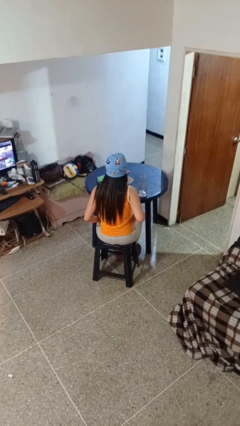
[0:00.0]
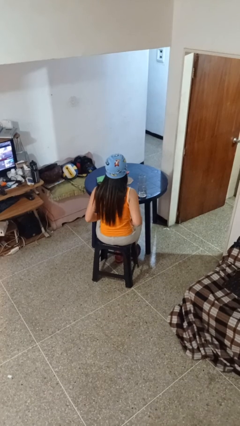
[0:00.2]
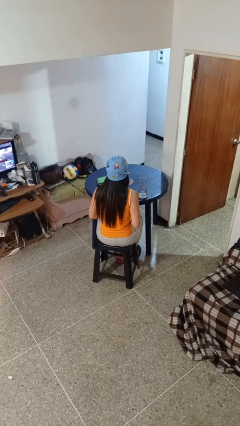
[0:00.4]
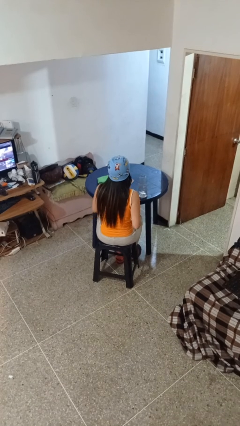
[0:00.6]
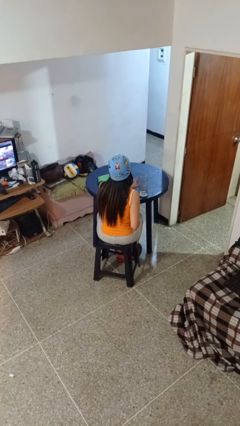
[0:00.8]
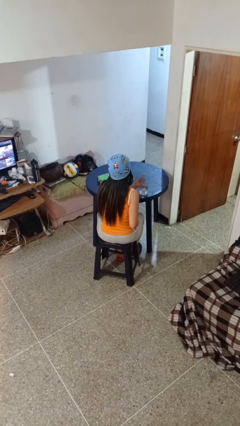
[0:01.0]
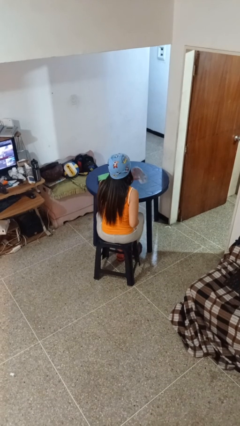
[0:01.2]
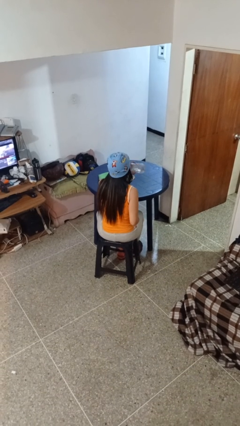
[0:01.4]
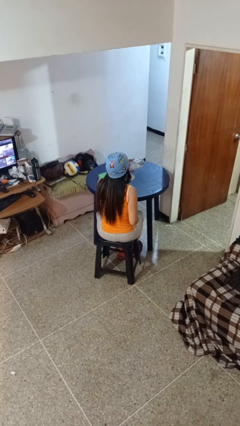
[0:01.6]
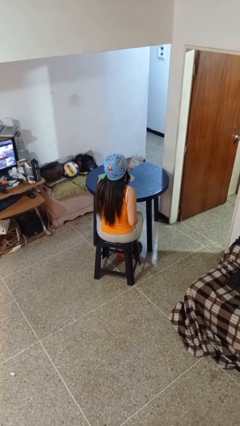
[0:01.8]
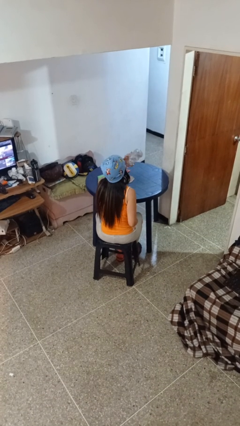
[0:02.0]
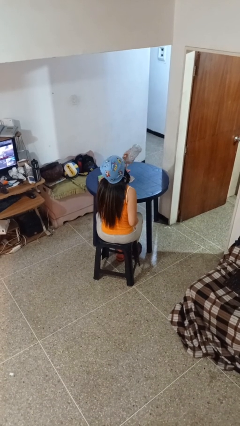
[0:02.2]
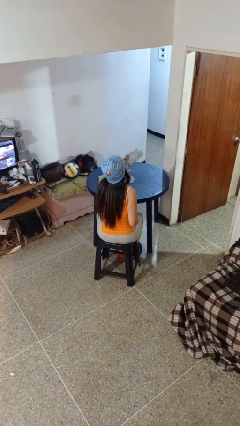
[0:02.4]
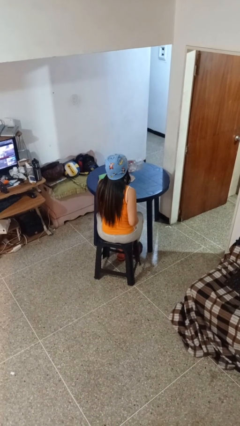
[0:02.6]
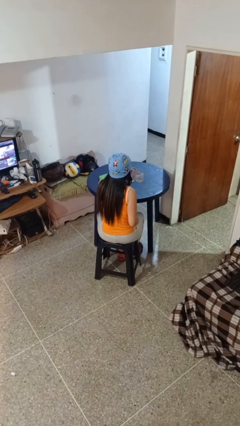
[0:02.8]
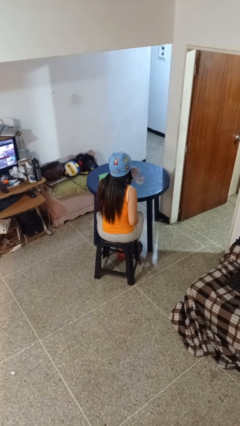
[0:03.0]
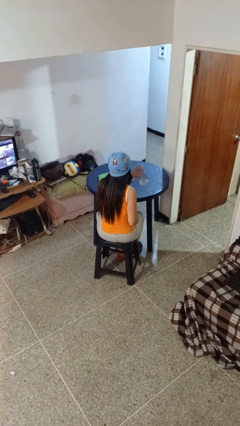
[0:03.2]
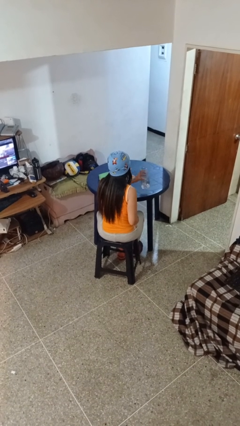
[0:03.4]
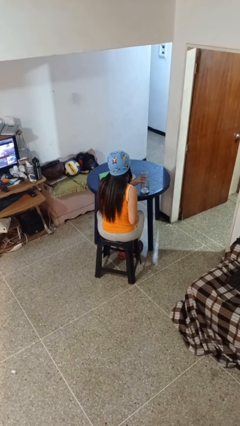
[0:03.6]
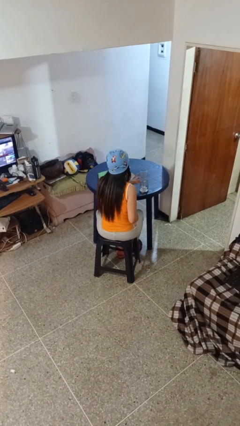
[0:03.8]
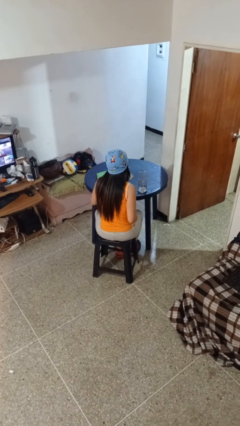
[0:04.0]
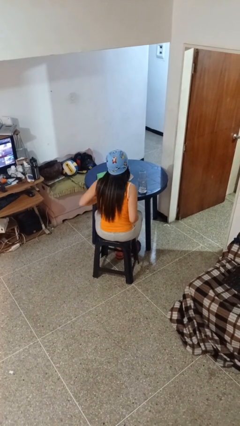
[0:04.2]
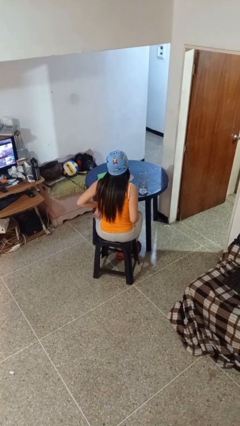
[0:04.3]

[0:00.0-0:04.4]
person drinks from bottle

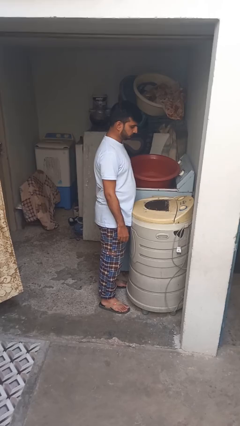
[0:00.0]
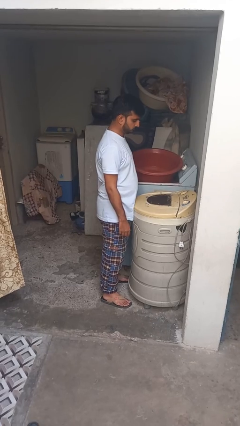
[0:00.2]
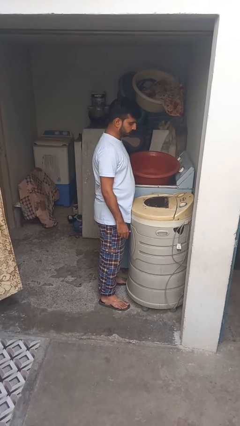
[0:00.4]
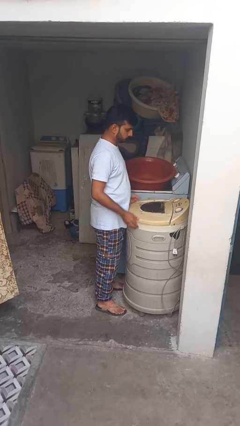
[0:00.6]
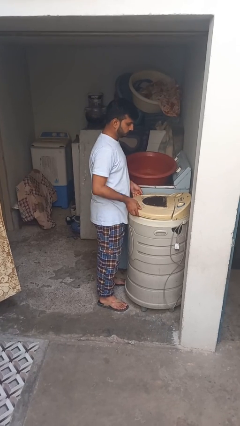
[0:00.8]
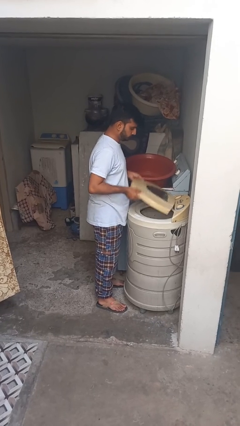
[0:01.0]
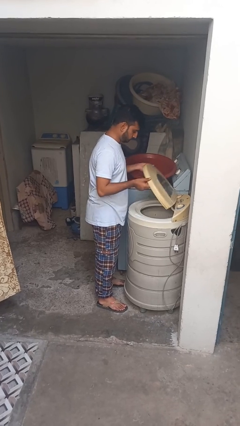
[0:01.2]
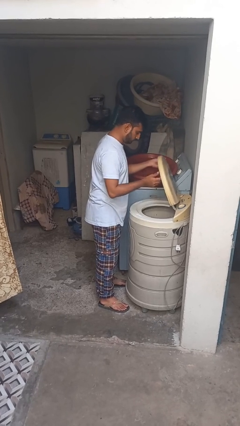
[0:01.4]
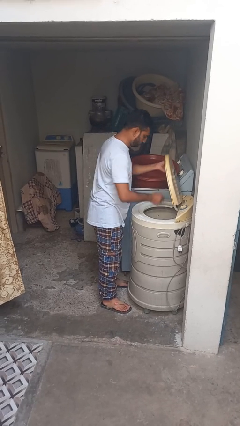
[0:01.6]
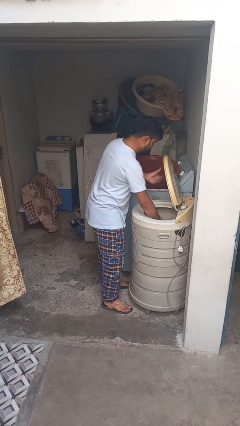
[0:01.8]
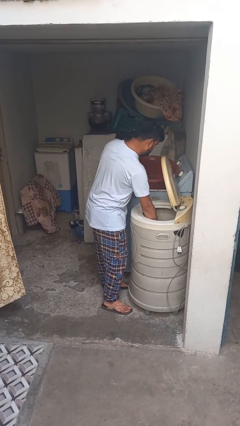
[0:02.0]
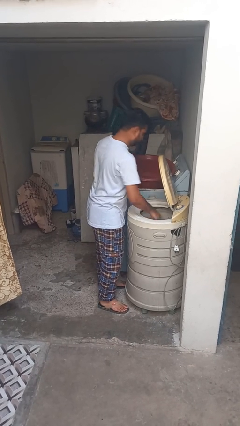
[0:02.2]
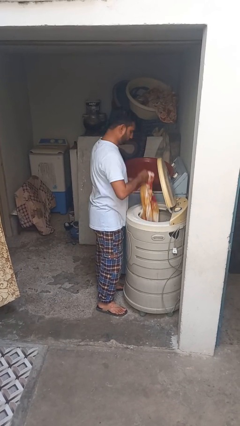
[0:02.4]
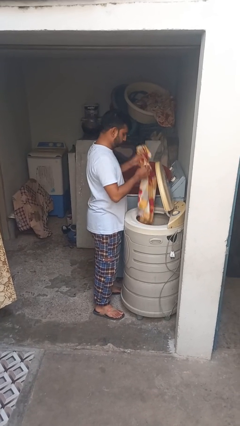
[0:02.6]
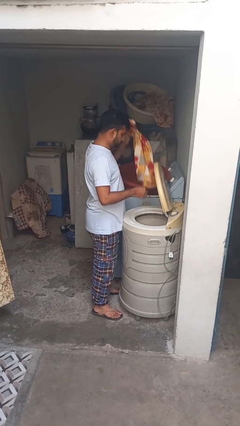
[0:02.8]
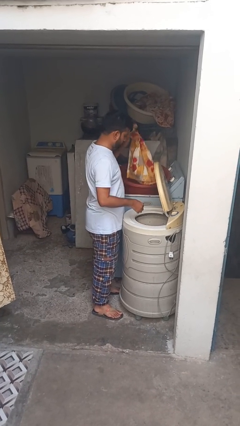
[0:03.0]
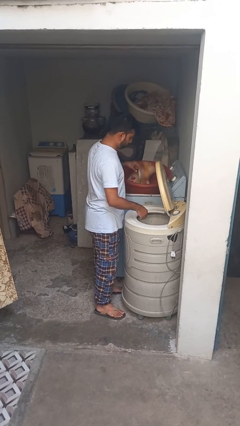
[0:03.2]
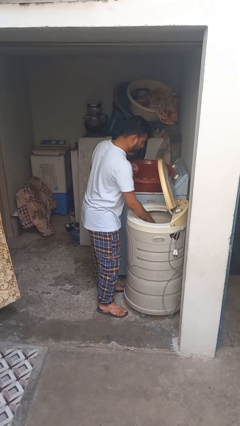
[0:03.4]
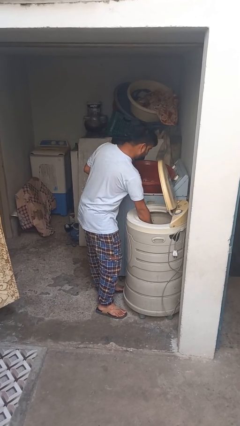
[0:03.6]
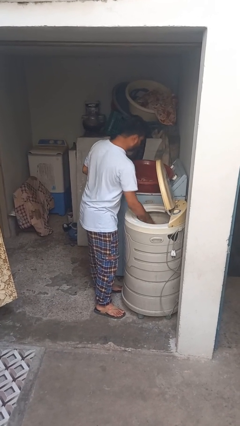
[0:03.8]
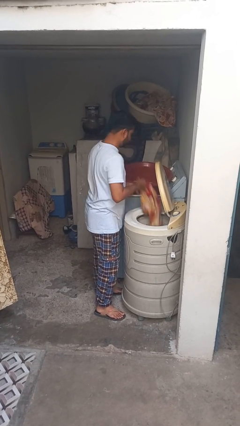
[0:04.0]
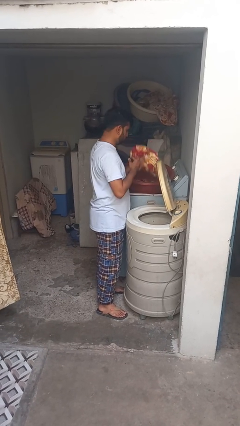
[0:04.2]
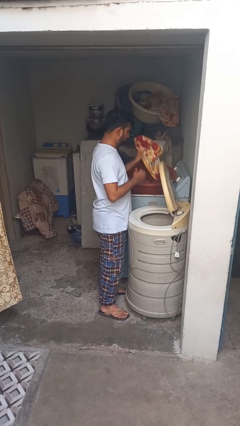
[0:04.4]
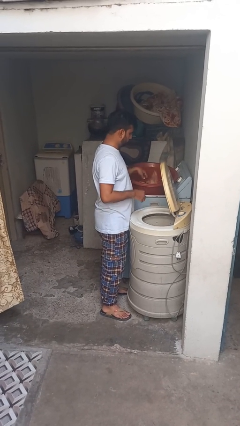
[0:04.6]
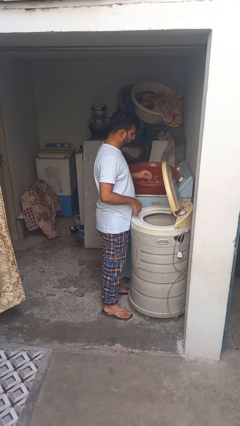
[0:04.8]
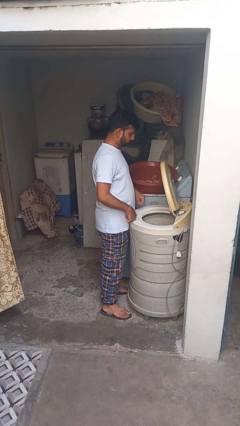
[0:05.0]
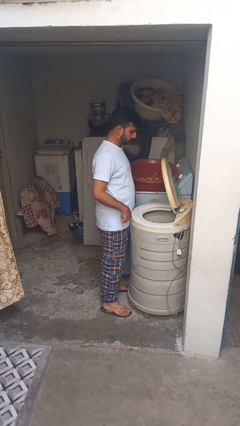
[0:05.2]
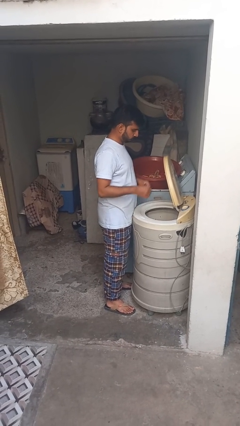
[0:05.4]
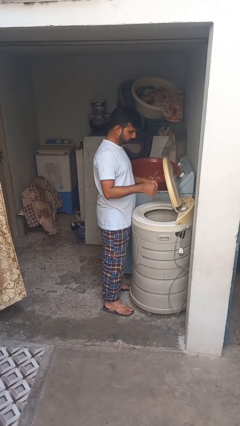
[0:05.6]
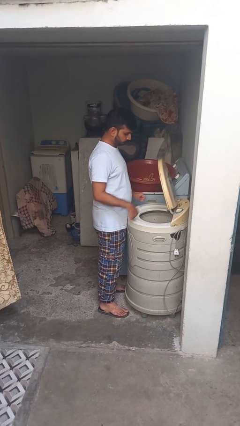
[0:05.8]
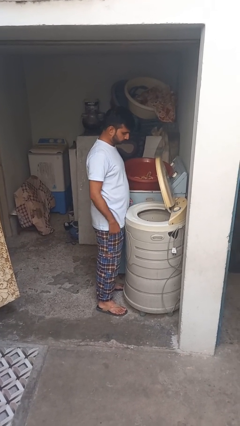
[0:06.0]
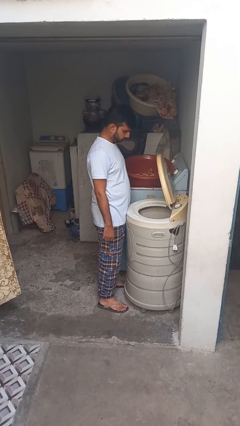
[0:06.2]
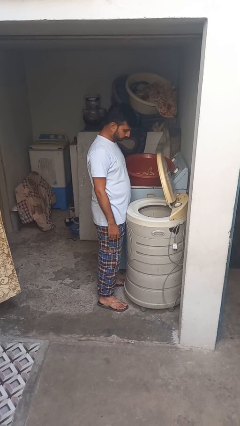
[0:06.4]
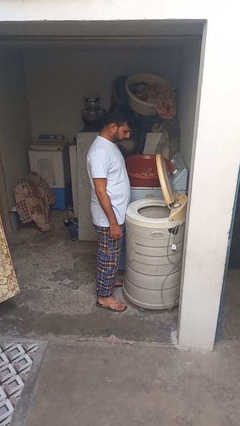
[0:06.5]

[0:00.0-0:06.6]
person unloads clotheswasher

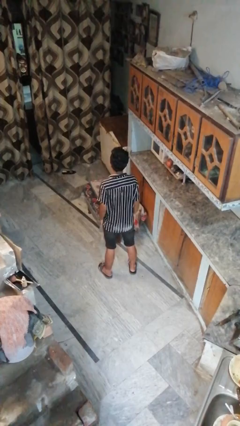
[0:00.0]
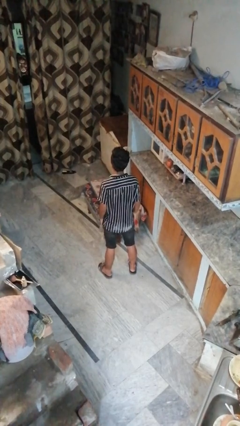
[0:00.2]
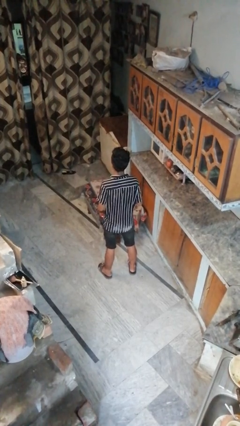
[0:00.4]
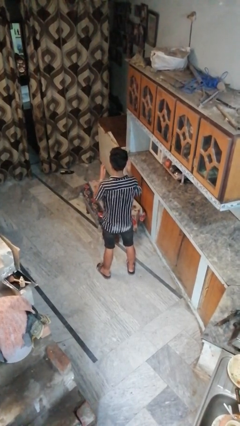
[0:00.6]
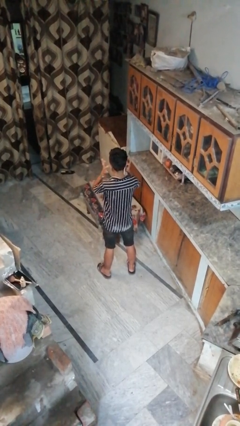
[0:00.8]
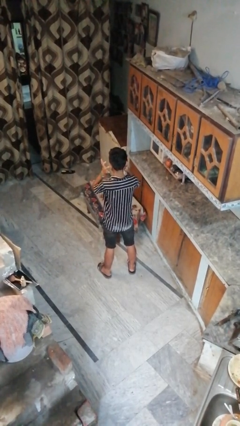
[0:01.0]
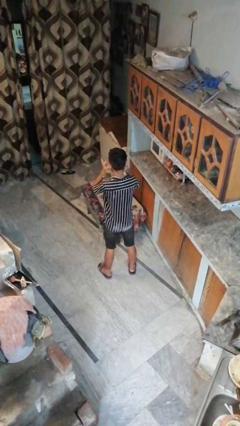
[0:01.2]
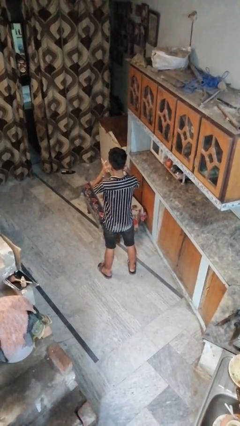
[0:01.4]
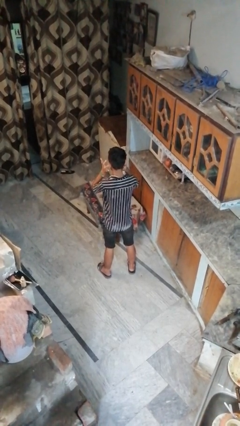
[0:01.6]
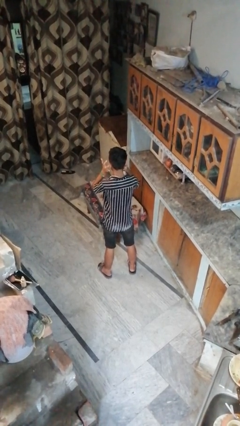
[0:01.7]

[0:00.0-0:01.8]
person puts fingers in ear

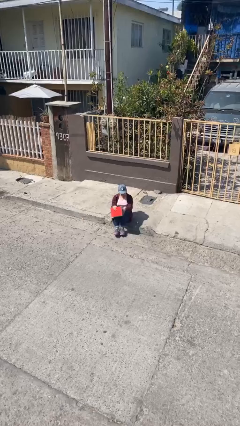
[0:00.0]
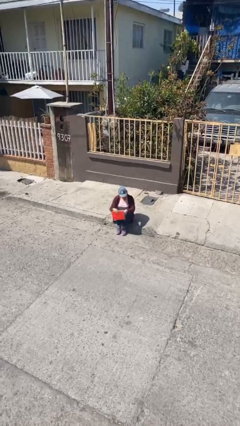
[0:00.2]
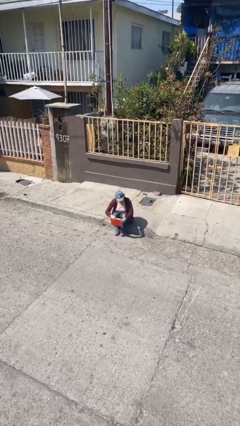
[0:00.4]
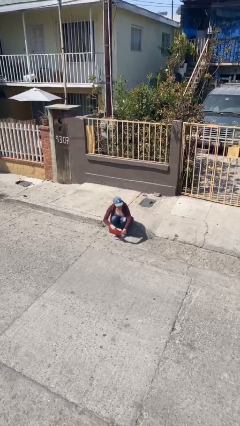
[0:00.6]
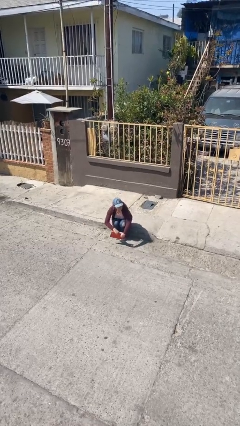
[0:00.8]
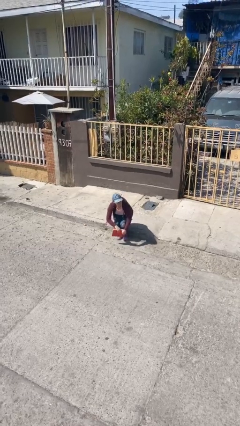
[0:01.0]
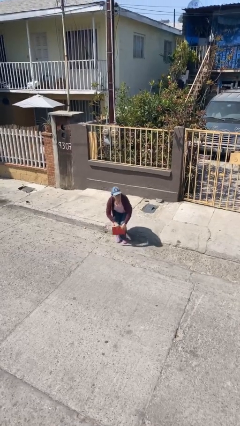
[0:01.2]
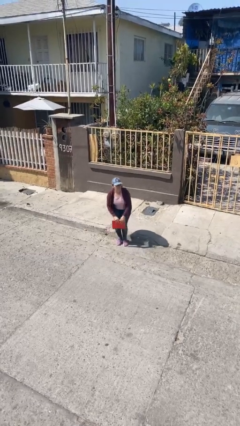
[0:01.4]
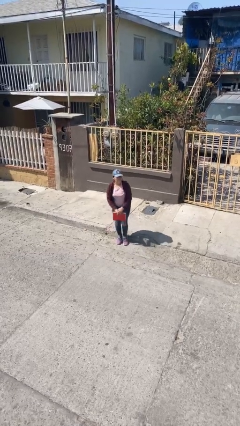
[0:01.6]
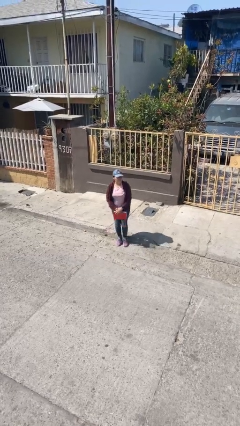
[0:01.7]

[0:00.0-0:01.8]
person stands up

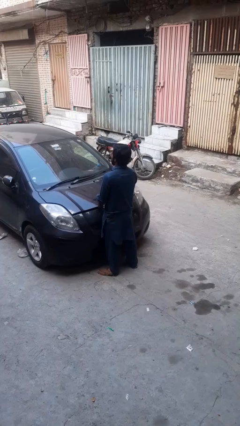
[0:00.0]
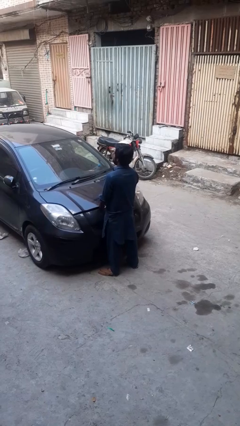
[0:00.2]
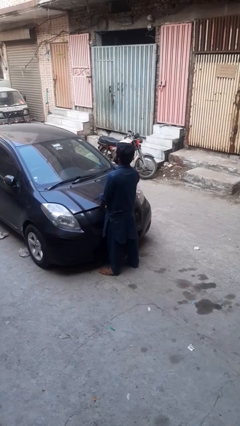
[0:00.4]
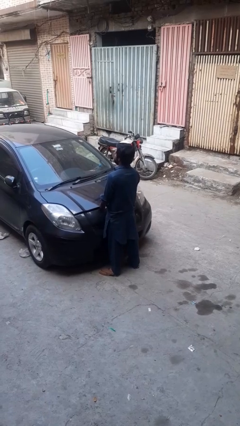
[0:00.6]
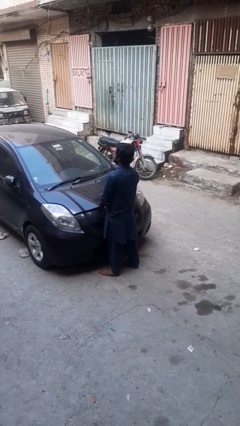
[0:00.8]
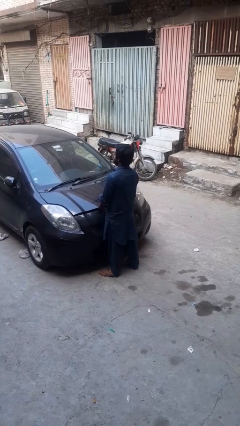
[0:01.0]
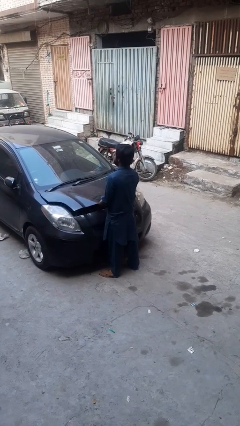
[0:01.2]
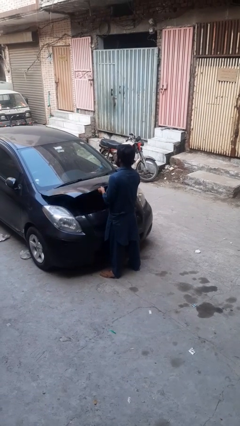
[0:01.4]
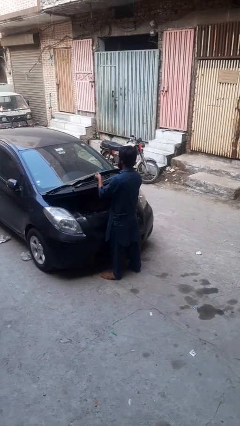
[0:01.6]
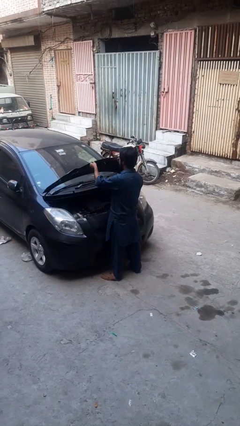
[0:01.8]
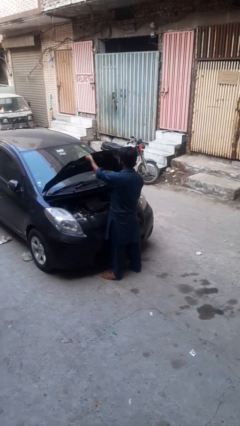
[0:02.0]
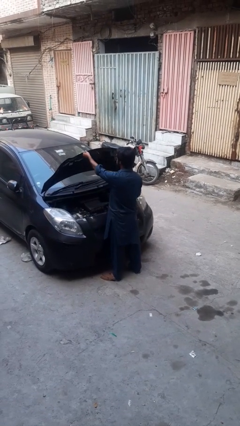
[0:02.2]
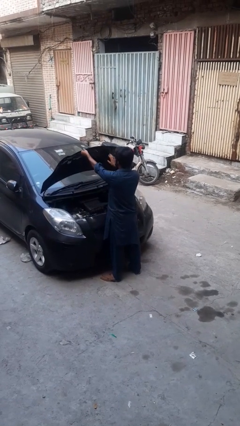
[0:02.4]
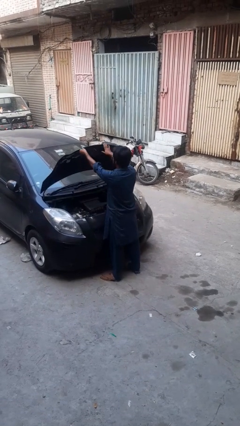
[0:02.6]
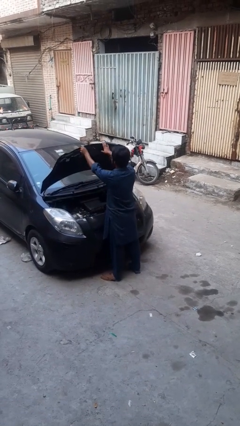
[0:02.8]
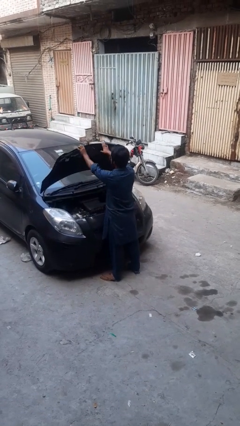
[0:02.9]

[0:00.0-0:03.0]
person opens car hood

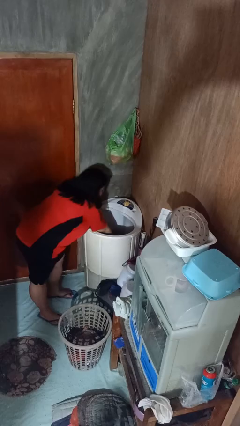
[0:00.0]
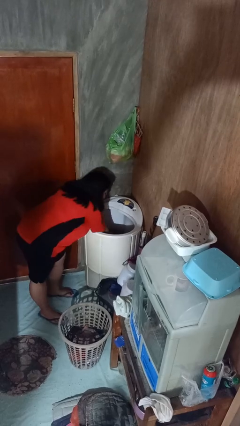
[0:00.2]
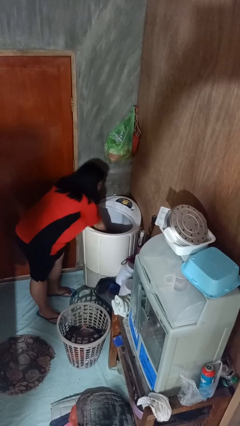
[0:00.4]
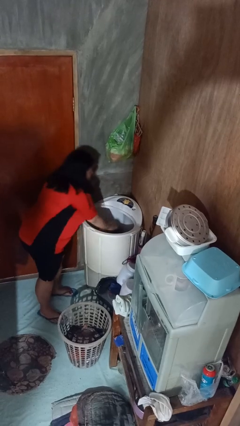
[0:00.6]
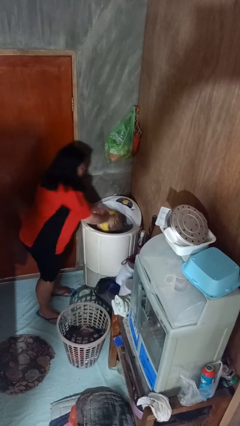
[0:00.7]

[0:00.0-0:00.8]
person loads clotheswasher
